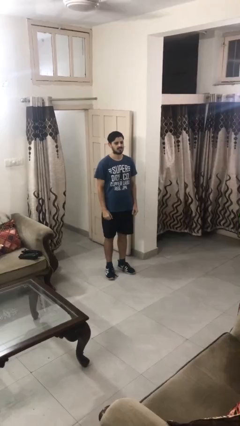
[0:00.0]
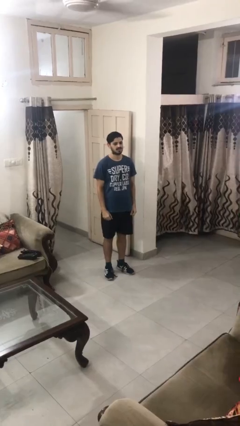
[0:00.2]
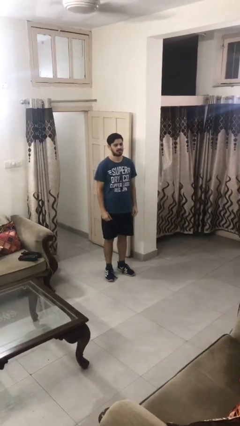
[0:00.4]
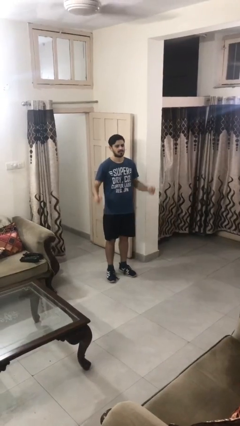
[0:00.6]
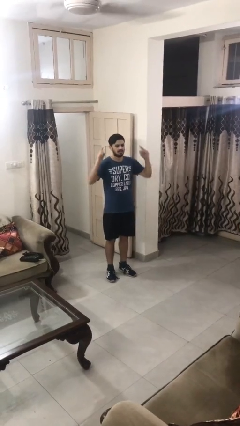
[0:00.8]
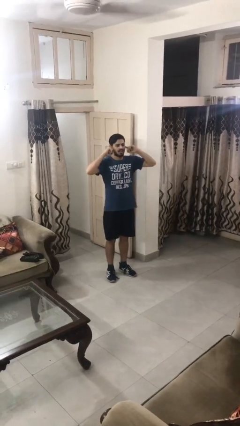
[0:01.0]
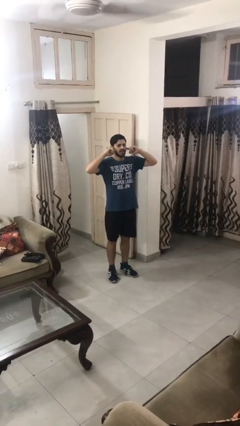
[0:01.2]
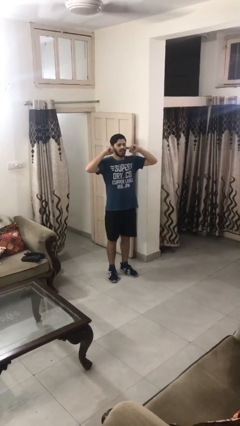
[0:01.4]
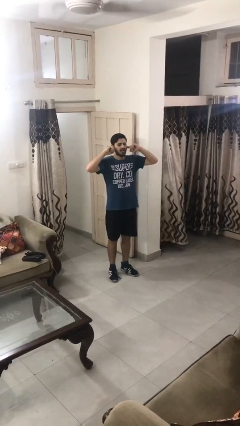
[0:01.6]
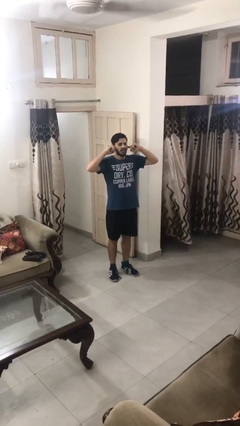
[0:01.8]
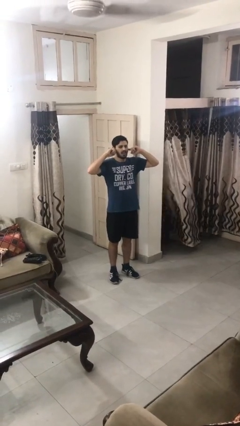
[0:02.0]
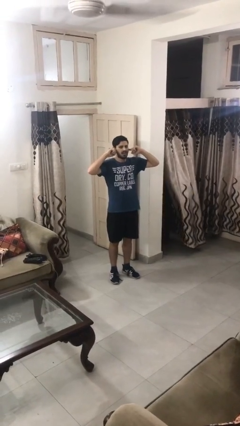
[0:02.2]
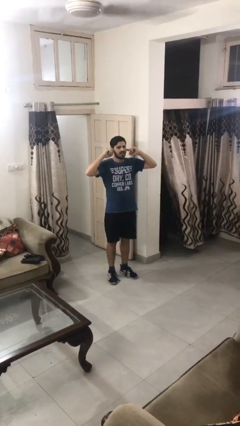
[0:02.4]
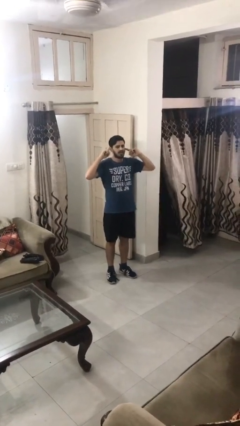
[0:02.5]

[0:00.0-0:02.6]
person puts fingers in ear

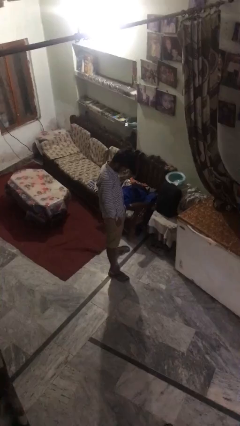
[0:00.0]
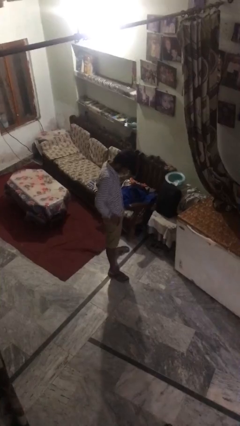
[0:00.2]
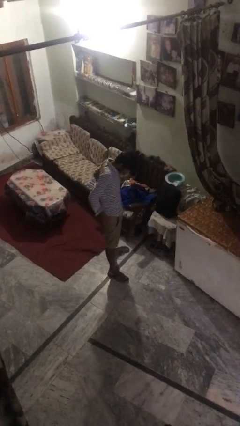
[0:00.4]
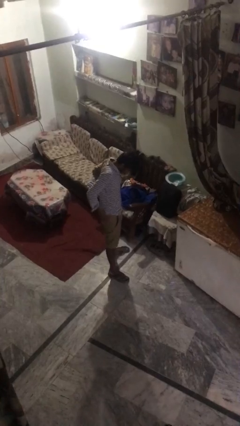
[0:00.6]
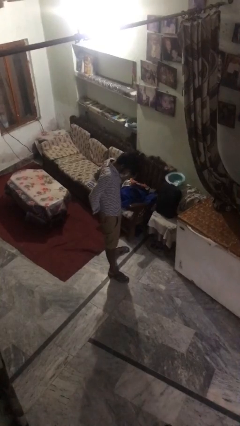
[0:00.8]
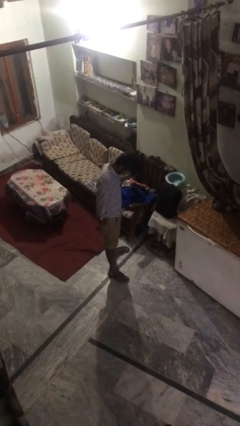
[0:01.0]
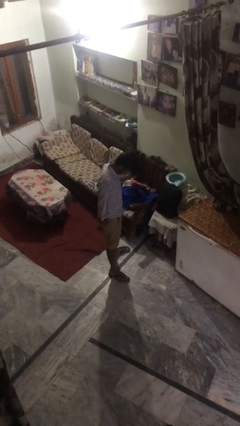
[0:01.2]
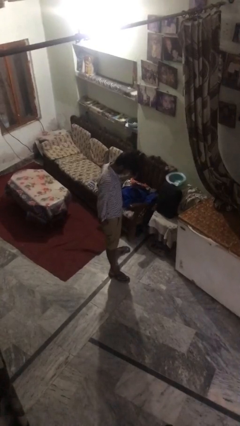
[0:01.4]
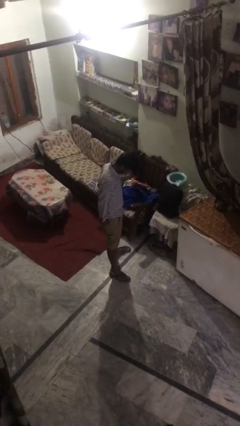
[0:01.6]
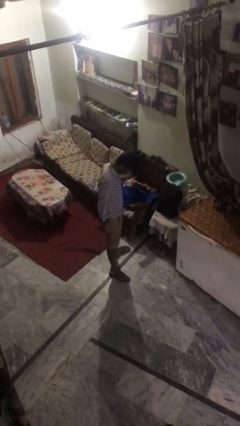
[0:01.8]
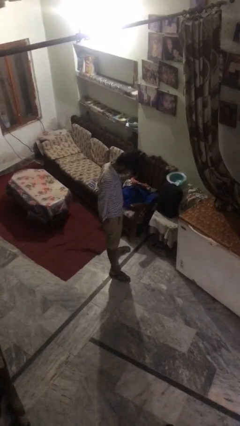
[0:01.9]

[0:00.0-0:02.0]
person puts hands in back pockets

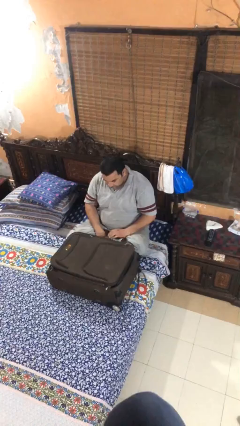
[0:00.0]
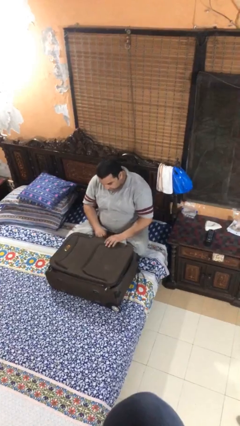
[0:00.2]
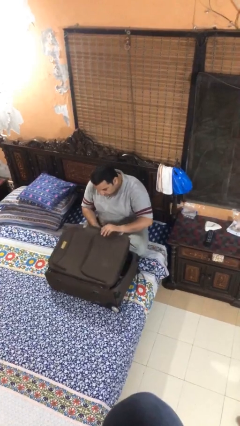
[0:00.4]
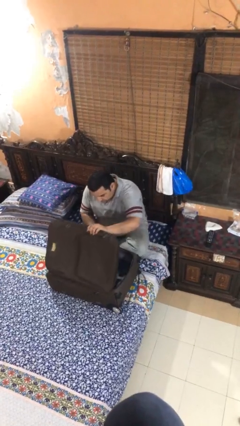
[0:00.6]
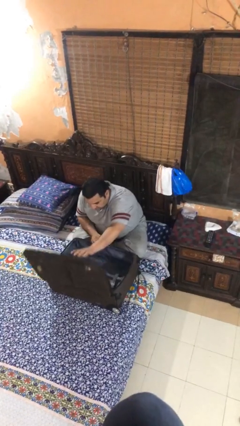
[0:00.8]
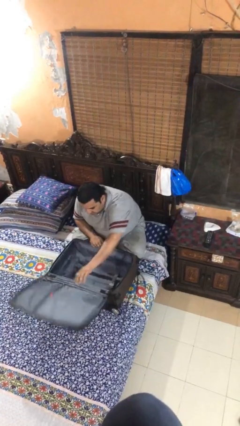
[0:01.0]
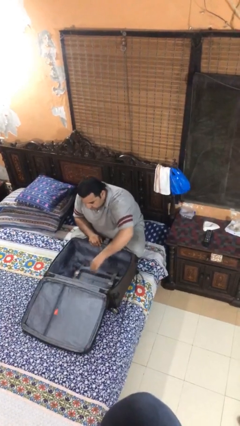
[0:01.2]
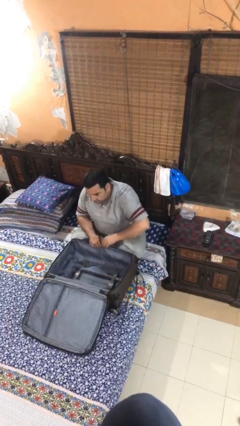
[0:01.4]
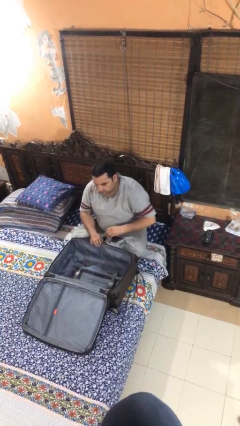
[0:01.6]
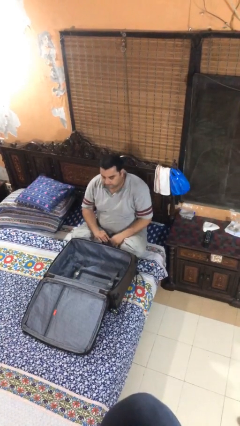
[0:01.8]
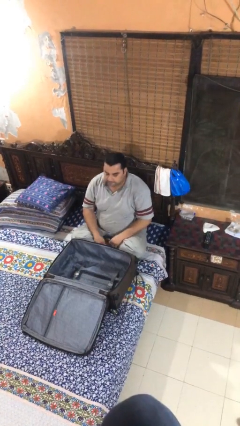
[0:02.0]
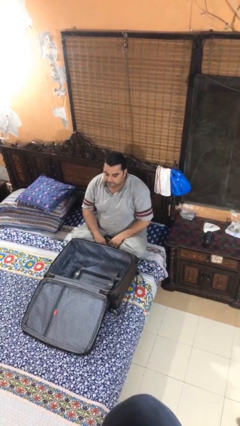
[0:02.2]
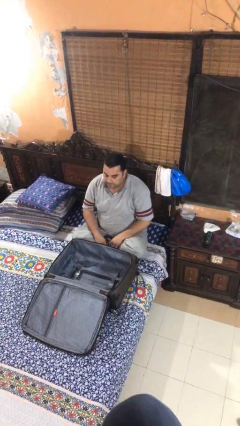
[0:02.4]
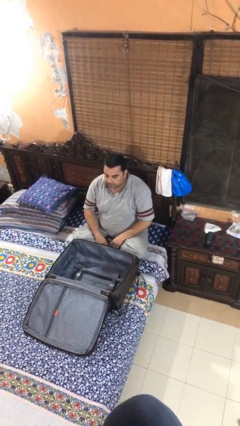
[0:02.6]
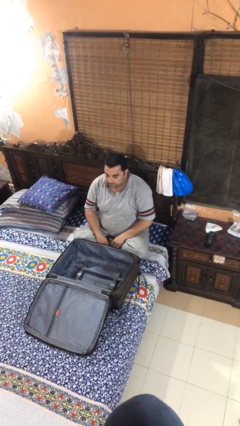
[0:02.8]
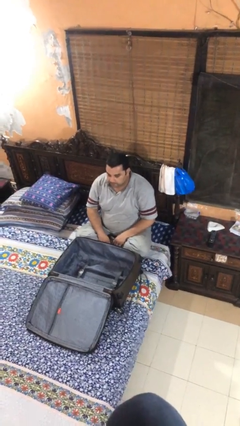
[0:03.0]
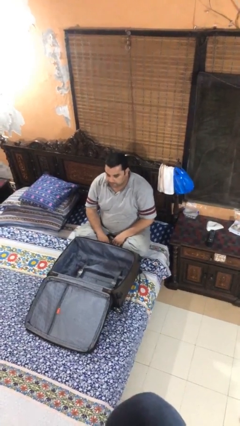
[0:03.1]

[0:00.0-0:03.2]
person opens suitcase

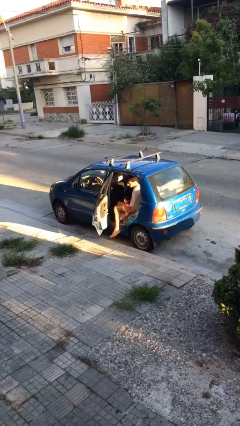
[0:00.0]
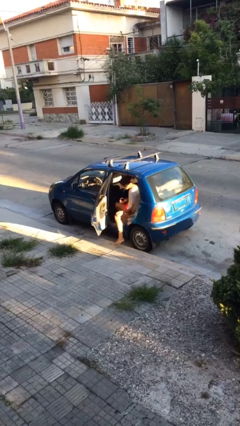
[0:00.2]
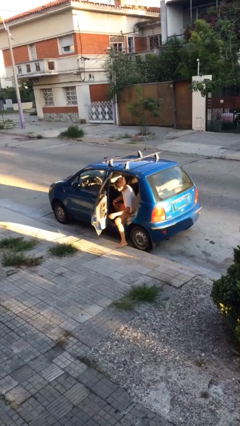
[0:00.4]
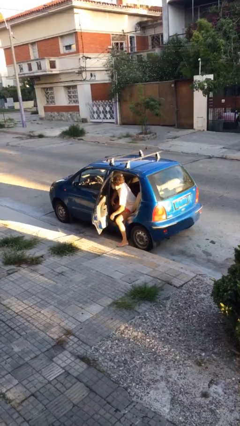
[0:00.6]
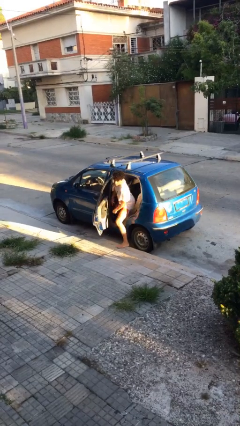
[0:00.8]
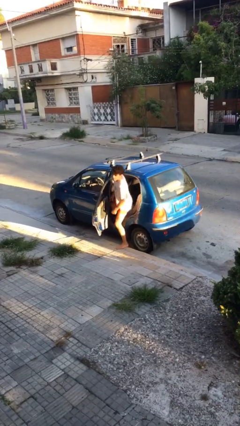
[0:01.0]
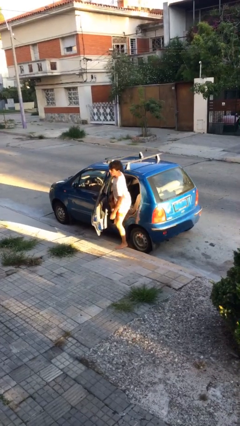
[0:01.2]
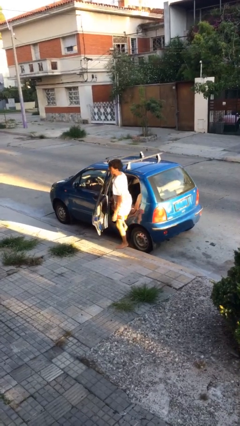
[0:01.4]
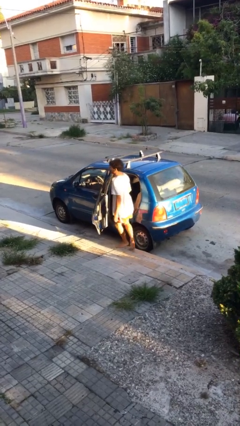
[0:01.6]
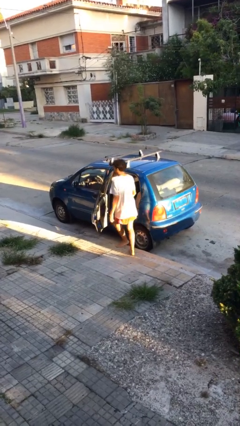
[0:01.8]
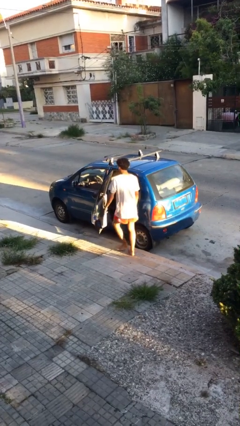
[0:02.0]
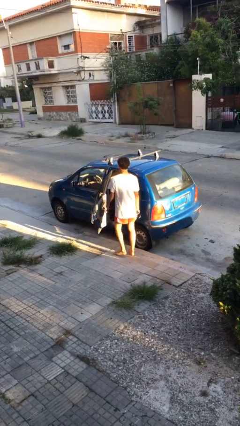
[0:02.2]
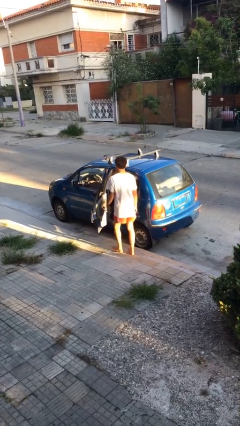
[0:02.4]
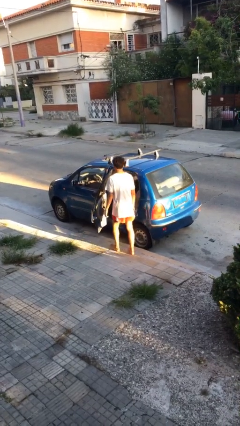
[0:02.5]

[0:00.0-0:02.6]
person exits car

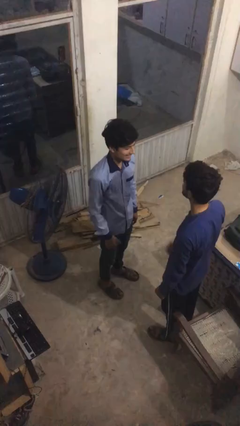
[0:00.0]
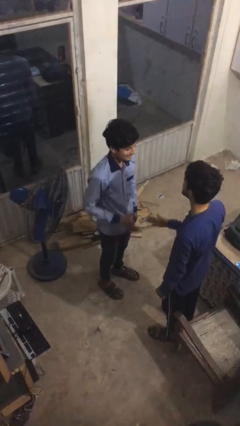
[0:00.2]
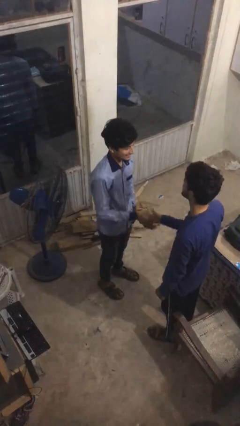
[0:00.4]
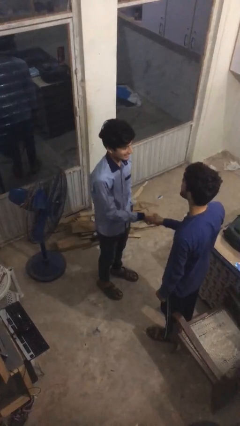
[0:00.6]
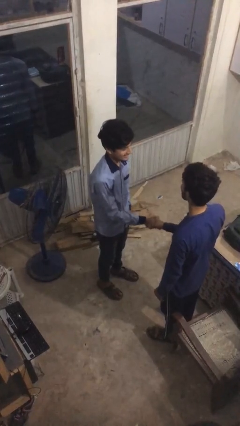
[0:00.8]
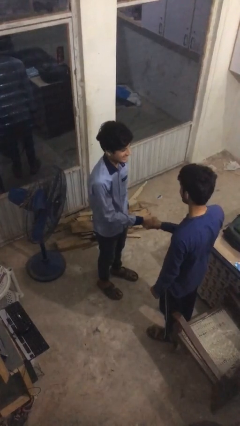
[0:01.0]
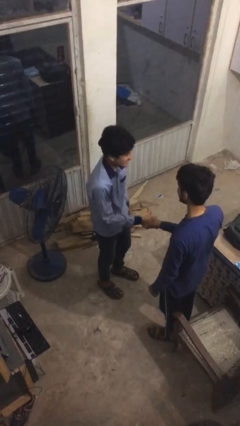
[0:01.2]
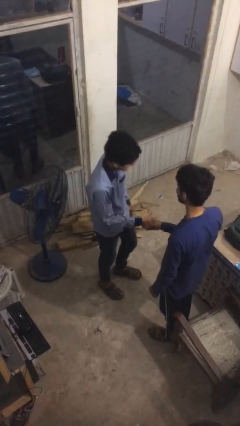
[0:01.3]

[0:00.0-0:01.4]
person shakes hand

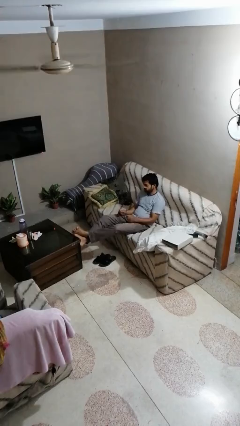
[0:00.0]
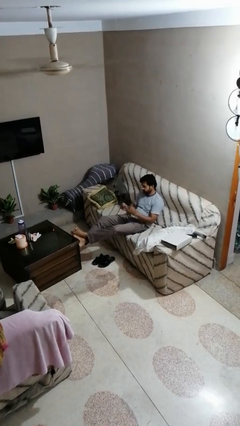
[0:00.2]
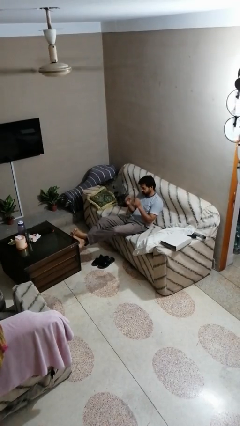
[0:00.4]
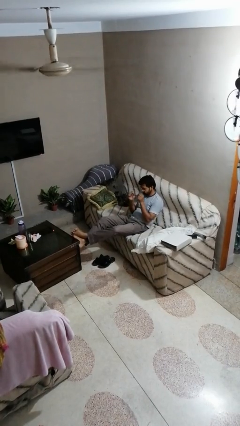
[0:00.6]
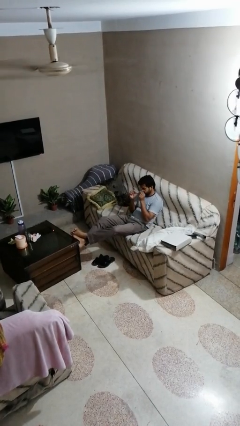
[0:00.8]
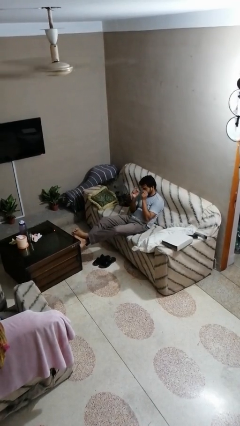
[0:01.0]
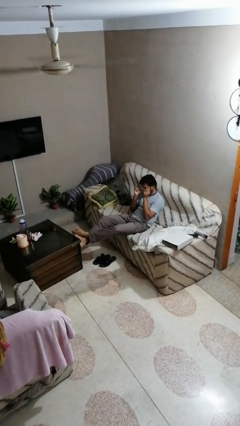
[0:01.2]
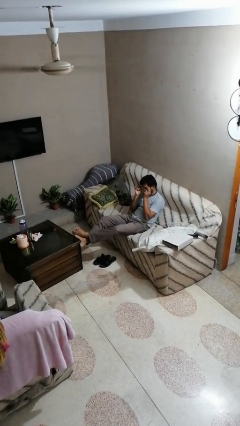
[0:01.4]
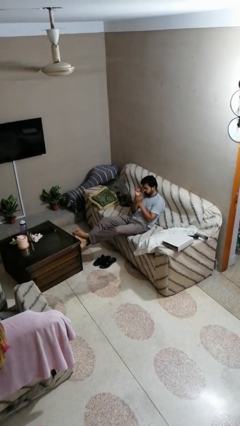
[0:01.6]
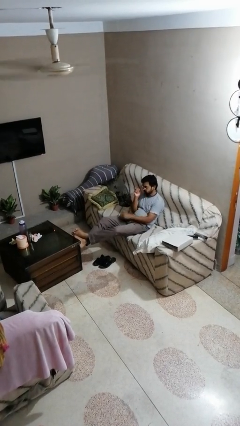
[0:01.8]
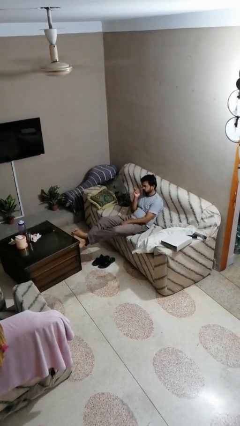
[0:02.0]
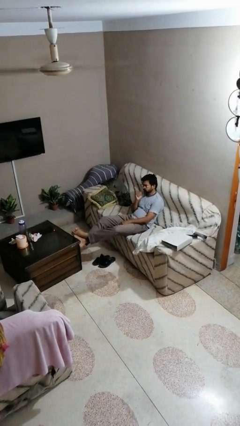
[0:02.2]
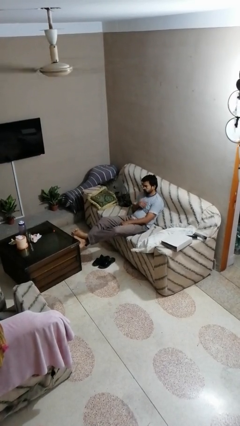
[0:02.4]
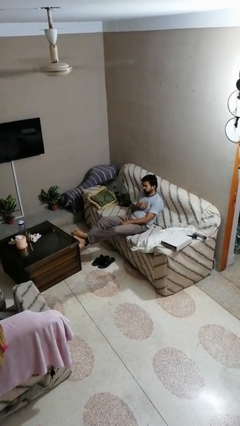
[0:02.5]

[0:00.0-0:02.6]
person puts on glasses

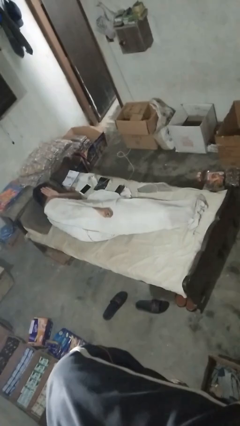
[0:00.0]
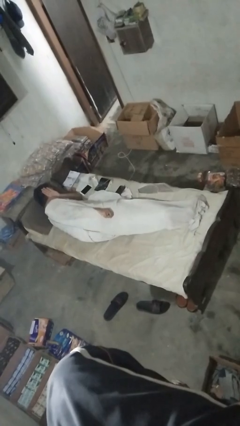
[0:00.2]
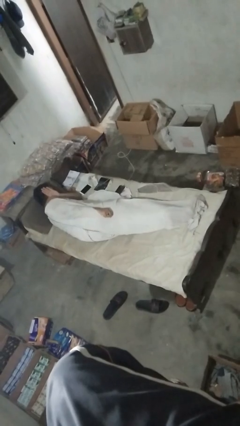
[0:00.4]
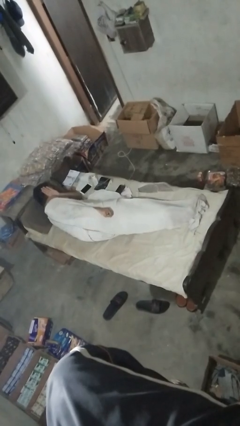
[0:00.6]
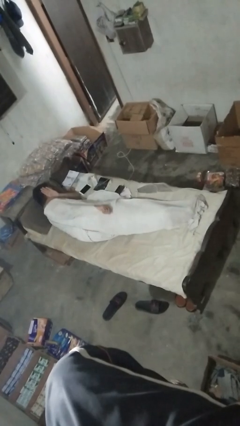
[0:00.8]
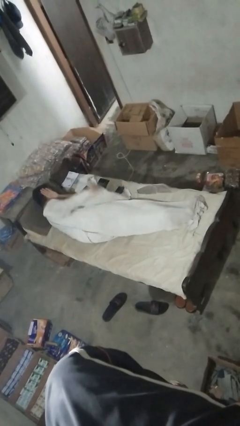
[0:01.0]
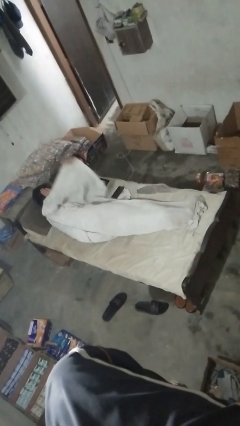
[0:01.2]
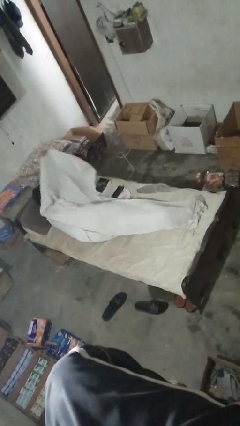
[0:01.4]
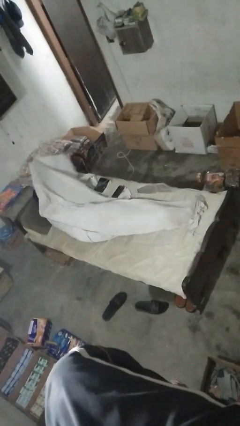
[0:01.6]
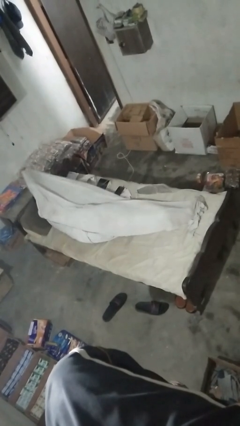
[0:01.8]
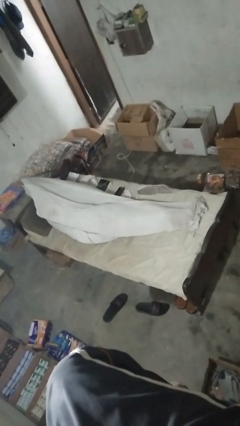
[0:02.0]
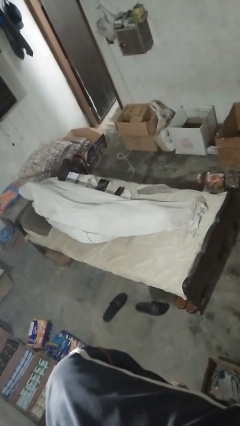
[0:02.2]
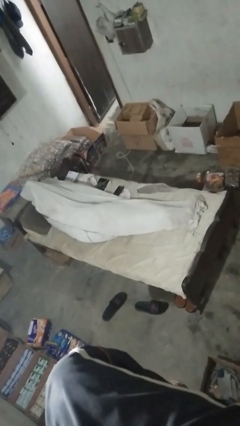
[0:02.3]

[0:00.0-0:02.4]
person covers with bedsheets

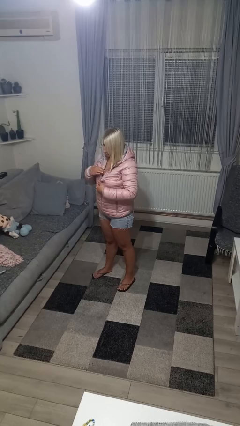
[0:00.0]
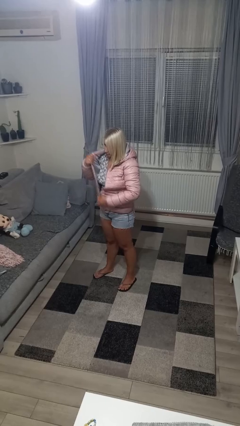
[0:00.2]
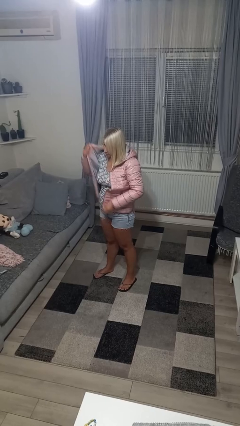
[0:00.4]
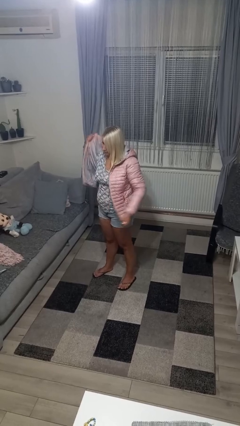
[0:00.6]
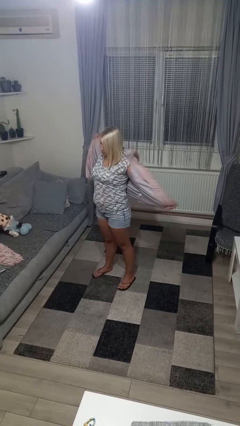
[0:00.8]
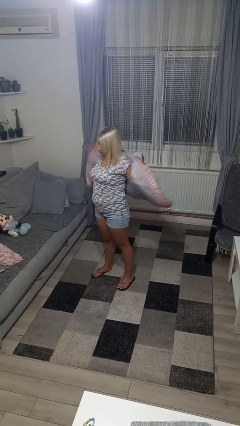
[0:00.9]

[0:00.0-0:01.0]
person unzips jacket
